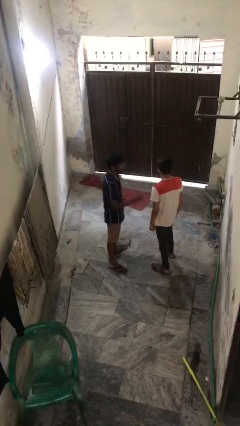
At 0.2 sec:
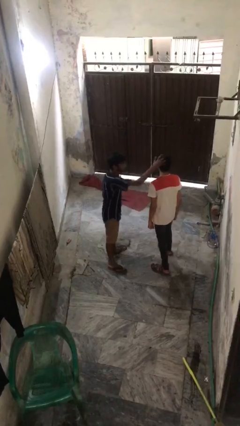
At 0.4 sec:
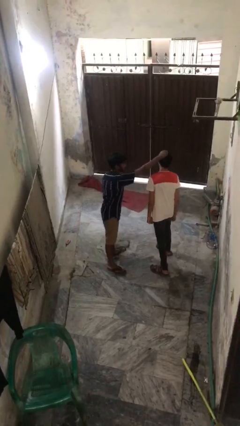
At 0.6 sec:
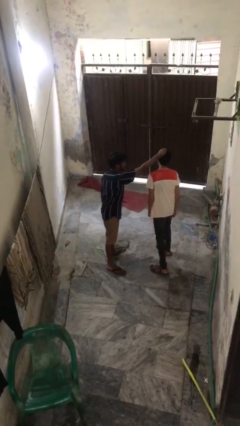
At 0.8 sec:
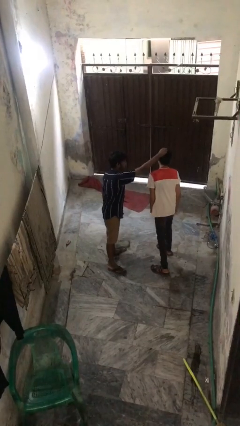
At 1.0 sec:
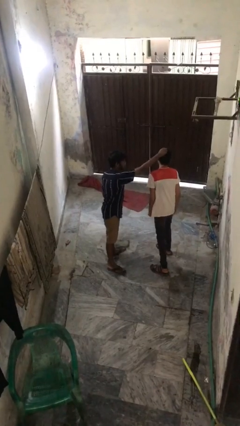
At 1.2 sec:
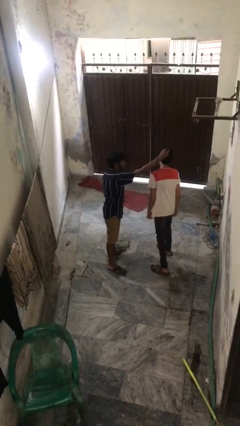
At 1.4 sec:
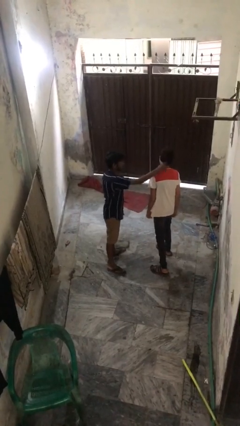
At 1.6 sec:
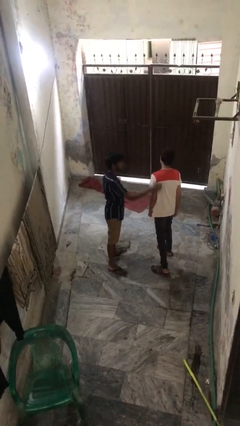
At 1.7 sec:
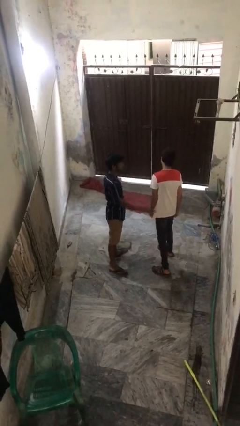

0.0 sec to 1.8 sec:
person grabs person by hair

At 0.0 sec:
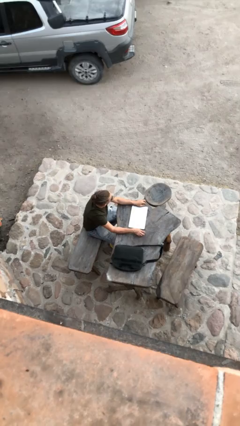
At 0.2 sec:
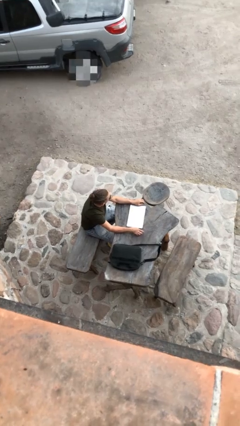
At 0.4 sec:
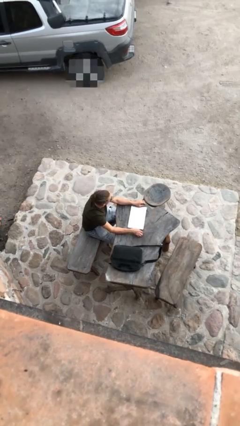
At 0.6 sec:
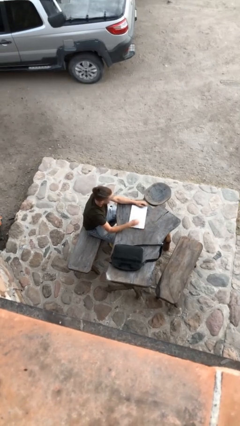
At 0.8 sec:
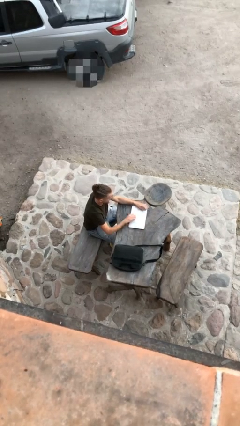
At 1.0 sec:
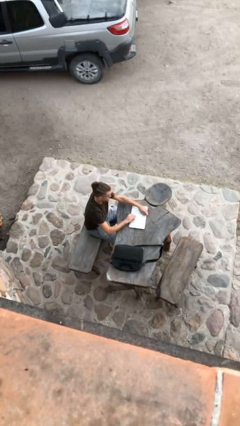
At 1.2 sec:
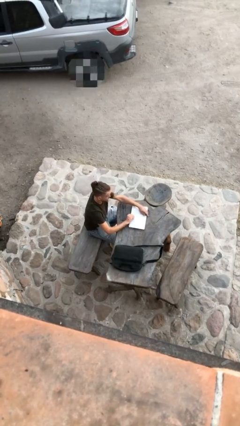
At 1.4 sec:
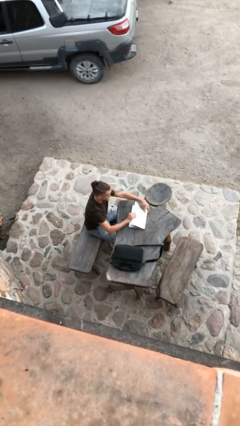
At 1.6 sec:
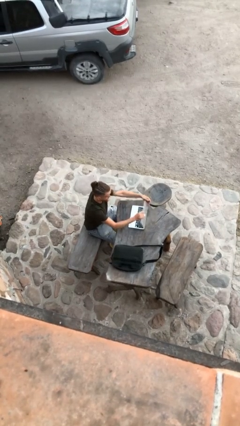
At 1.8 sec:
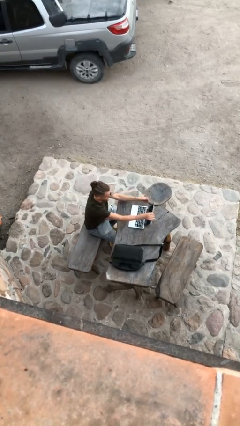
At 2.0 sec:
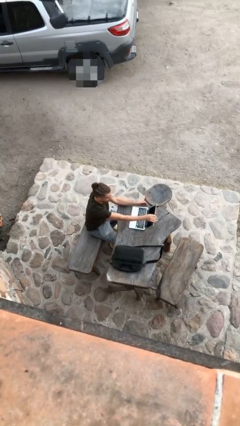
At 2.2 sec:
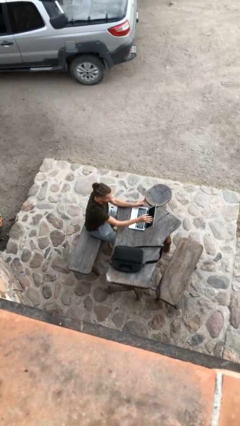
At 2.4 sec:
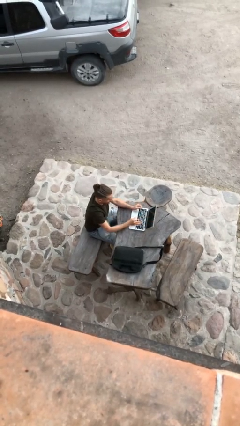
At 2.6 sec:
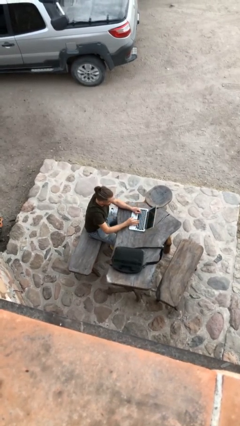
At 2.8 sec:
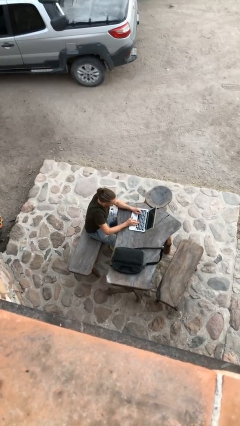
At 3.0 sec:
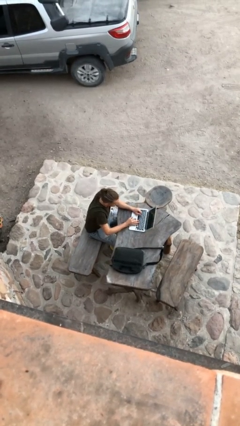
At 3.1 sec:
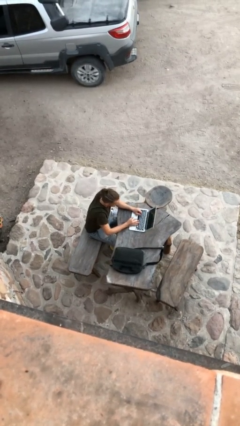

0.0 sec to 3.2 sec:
person interacts with laptop

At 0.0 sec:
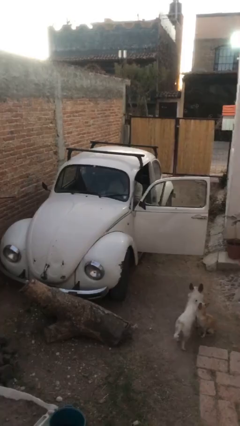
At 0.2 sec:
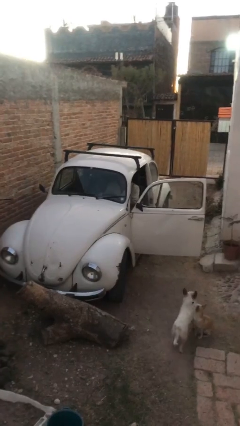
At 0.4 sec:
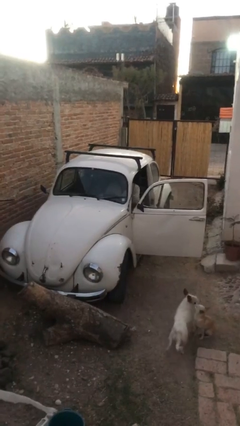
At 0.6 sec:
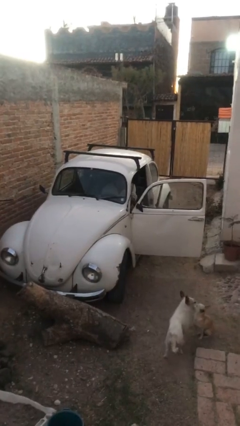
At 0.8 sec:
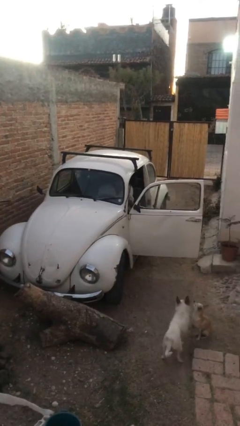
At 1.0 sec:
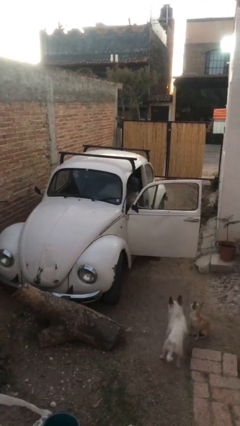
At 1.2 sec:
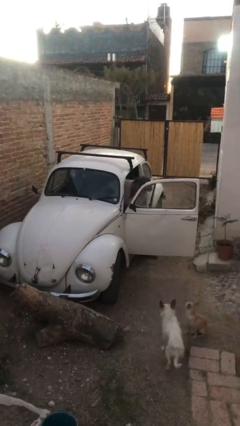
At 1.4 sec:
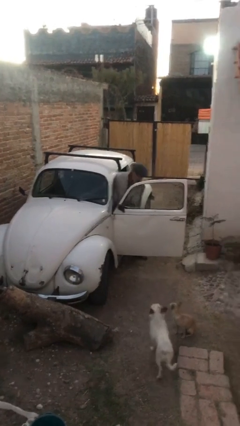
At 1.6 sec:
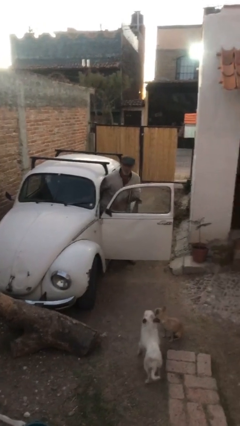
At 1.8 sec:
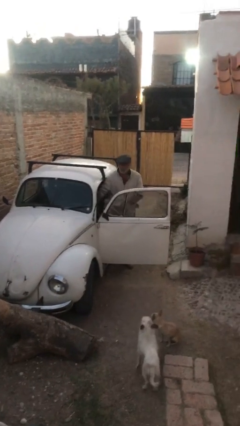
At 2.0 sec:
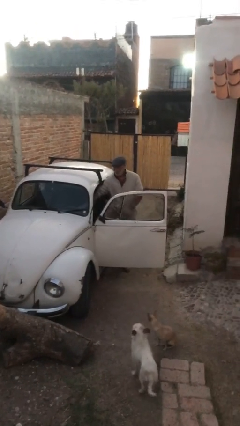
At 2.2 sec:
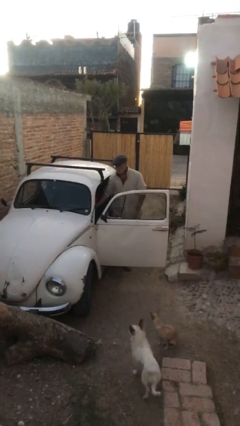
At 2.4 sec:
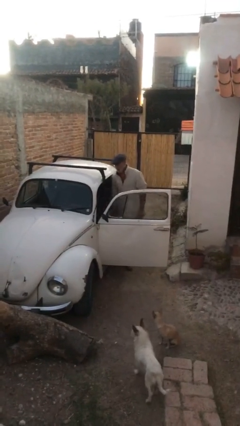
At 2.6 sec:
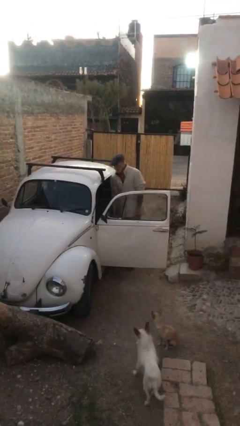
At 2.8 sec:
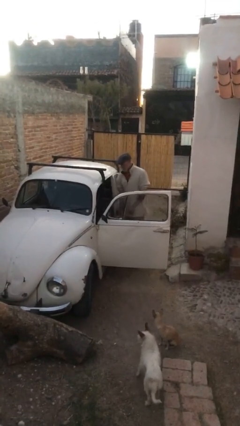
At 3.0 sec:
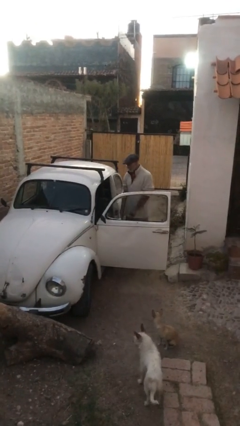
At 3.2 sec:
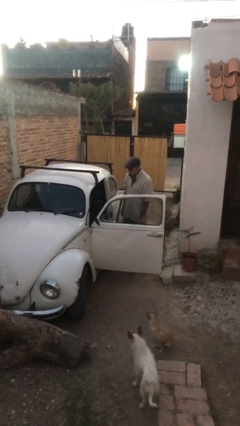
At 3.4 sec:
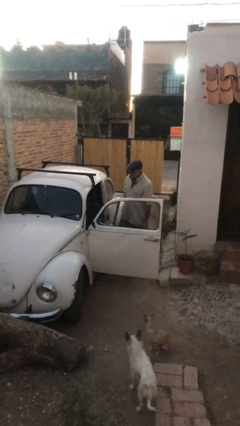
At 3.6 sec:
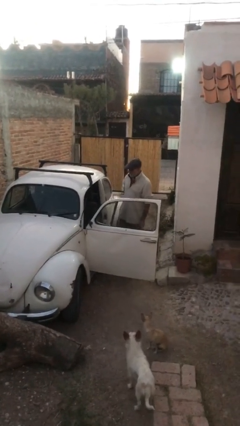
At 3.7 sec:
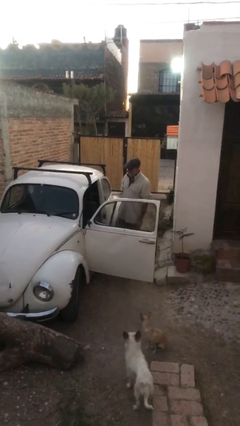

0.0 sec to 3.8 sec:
person exits car

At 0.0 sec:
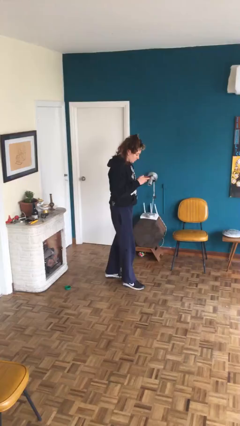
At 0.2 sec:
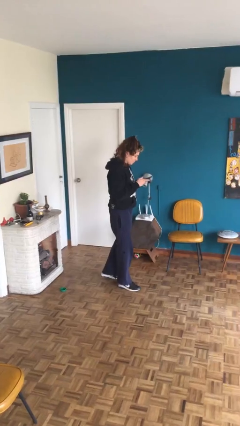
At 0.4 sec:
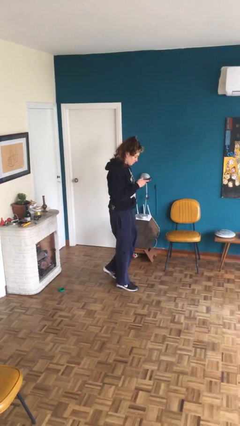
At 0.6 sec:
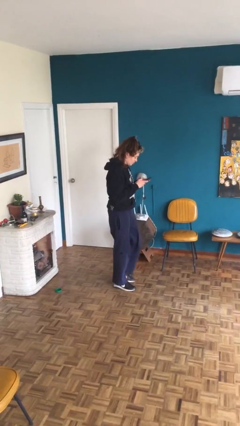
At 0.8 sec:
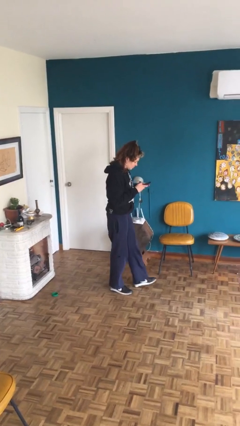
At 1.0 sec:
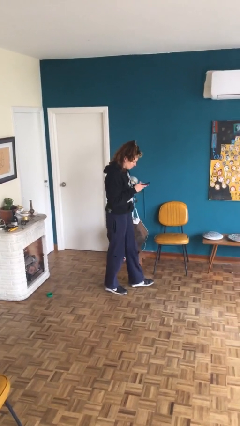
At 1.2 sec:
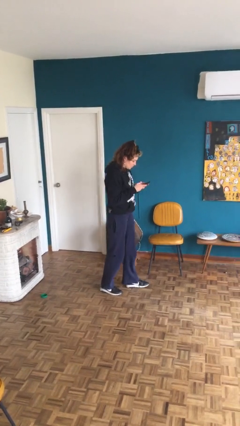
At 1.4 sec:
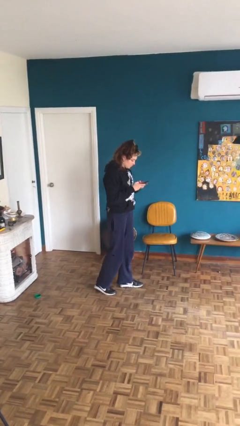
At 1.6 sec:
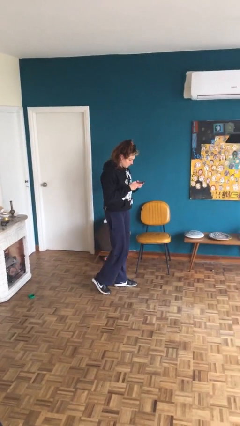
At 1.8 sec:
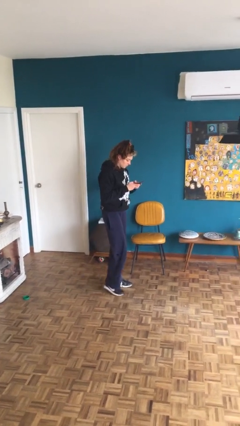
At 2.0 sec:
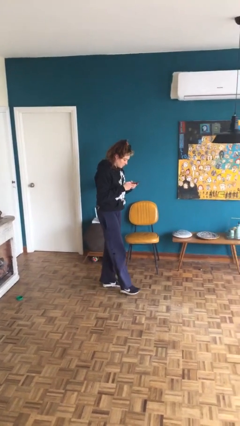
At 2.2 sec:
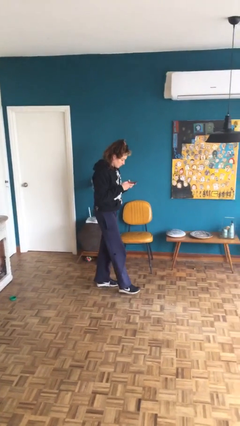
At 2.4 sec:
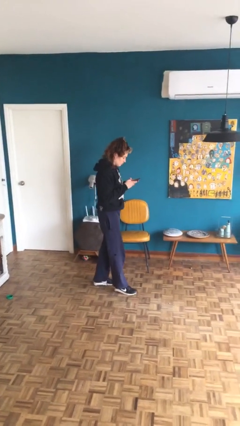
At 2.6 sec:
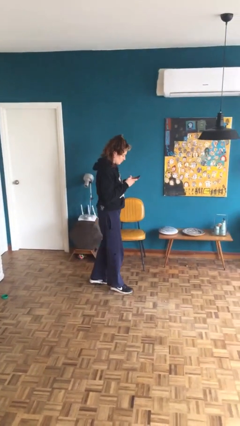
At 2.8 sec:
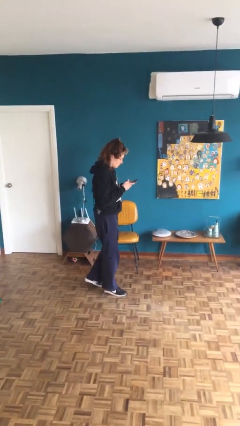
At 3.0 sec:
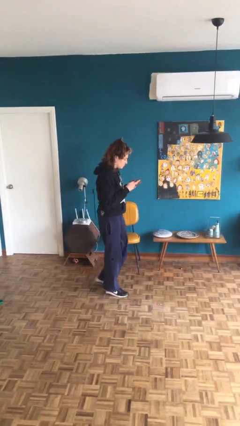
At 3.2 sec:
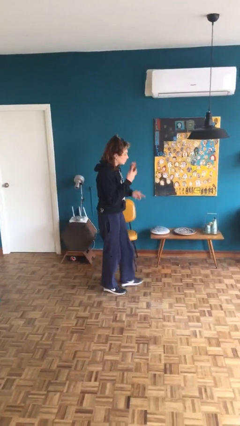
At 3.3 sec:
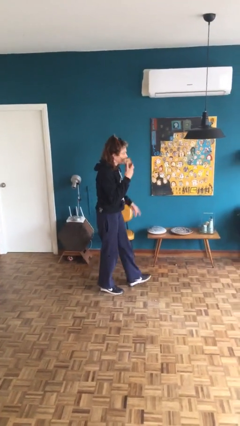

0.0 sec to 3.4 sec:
person texts on phone

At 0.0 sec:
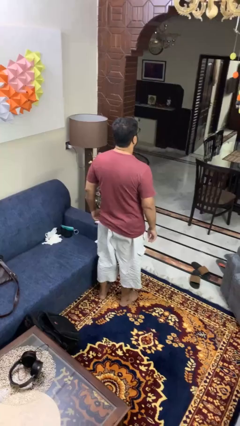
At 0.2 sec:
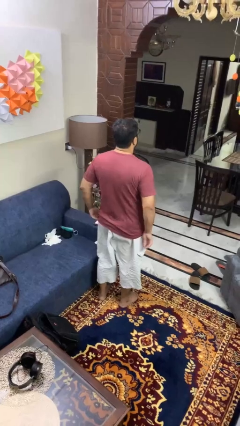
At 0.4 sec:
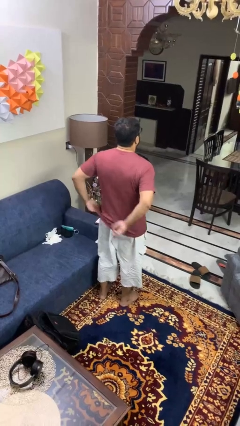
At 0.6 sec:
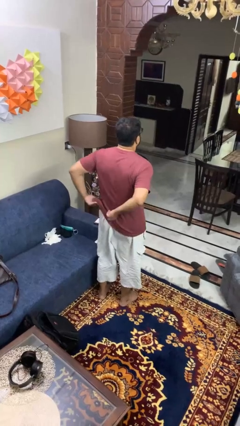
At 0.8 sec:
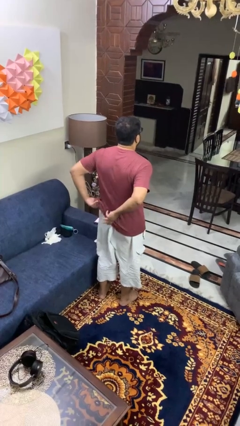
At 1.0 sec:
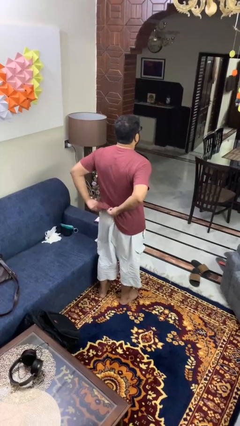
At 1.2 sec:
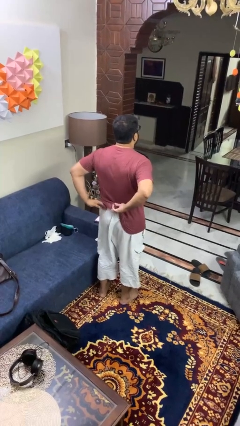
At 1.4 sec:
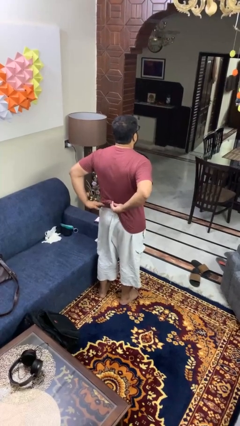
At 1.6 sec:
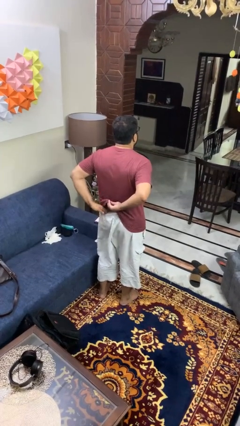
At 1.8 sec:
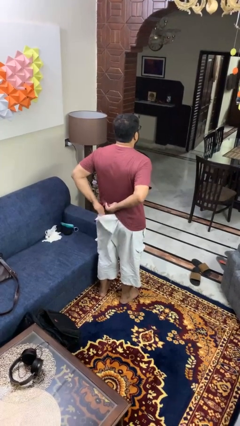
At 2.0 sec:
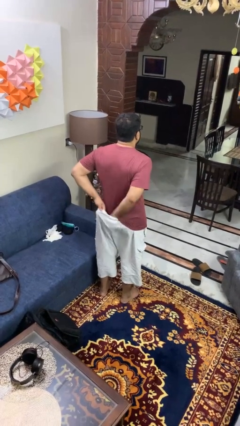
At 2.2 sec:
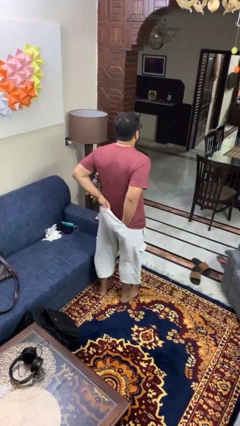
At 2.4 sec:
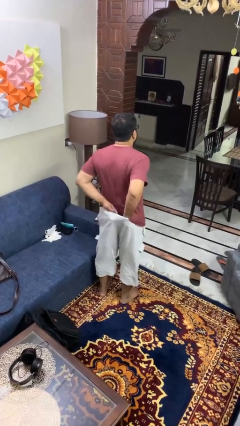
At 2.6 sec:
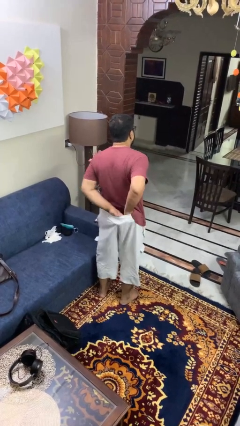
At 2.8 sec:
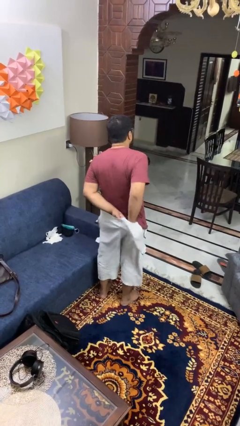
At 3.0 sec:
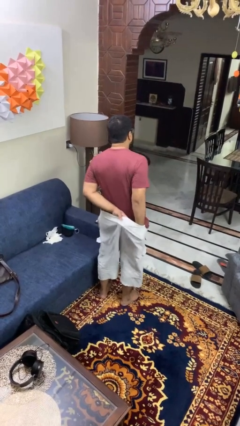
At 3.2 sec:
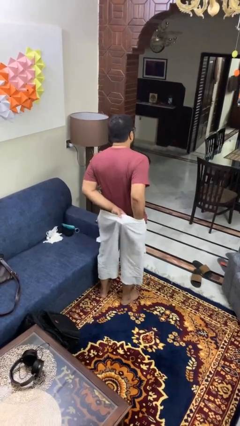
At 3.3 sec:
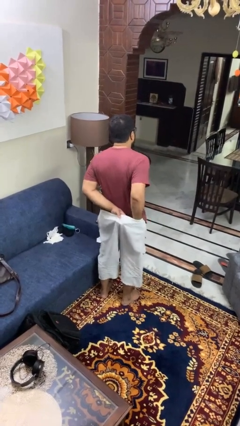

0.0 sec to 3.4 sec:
person tucks in shirt

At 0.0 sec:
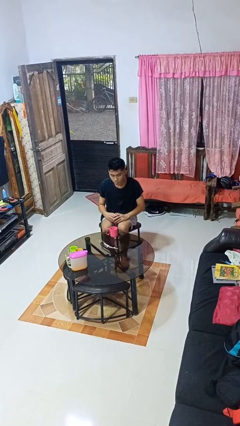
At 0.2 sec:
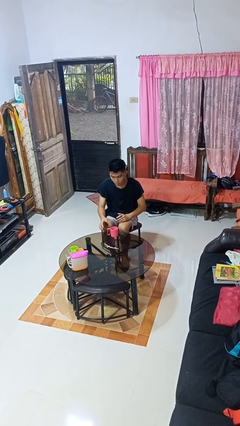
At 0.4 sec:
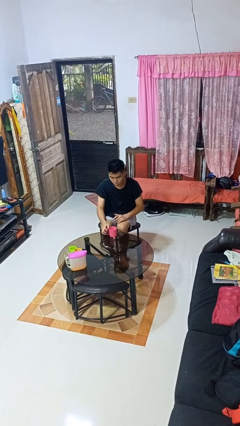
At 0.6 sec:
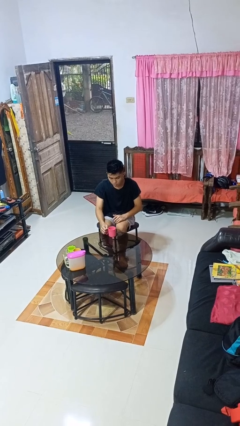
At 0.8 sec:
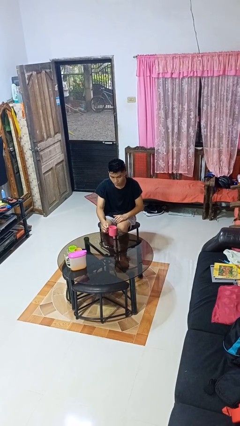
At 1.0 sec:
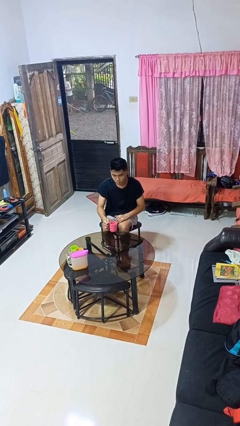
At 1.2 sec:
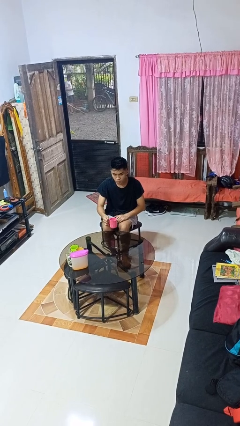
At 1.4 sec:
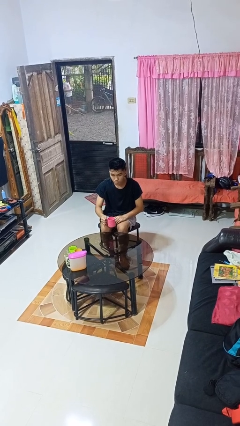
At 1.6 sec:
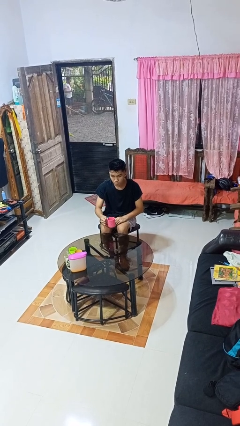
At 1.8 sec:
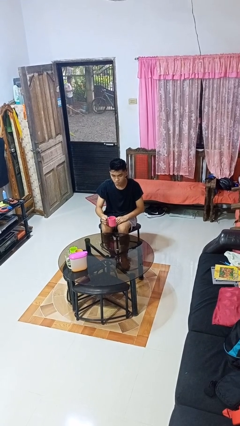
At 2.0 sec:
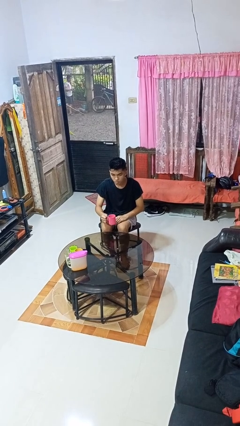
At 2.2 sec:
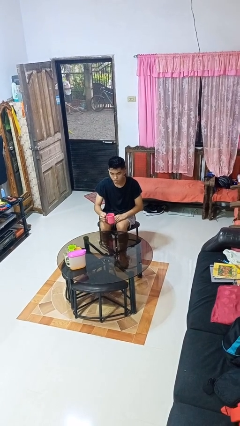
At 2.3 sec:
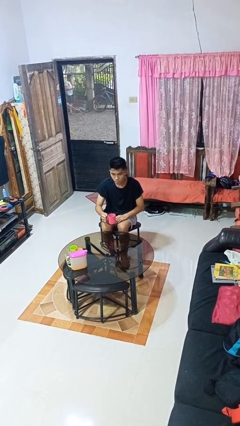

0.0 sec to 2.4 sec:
person picks up object from table
